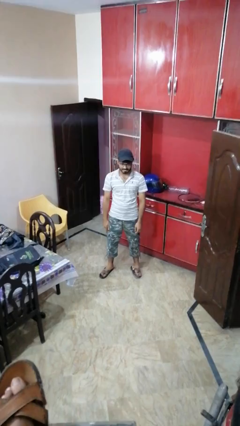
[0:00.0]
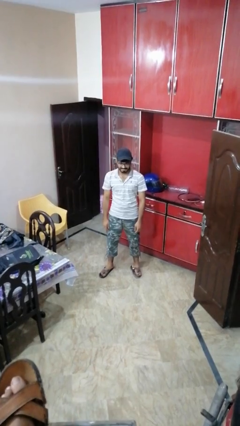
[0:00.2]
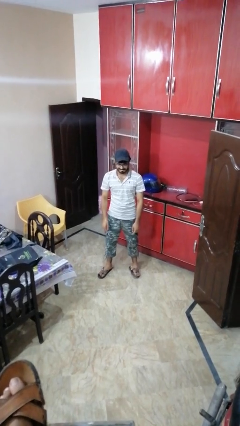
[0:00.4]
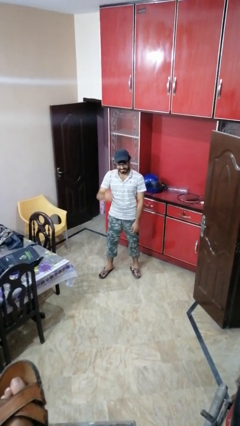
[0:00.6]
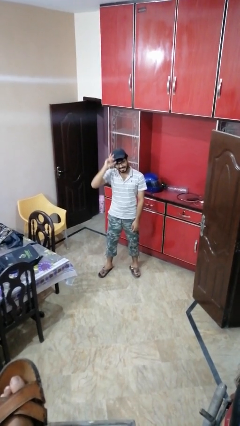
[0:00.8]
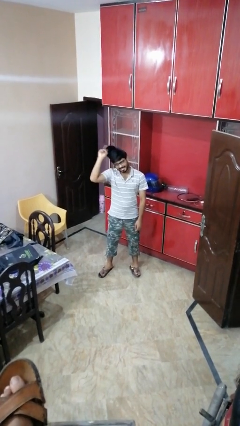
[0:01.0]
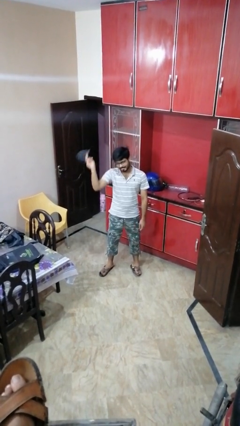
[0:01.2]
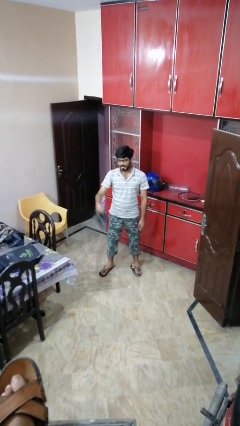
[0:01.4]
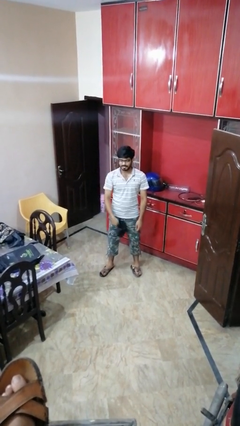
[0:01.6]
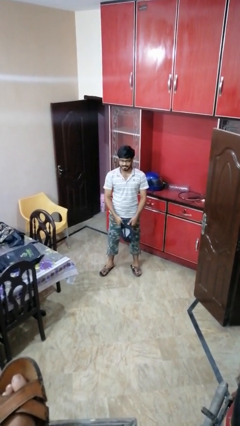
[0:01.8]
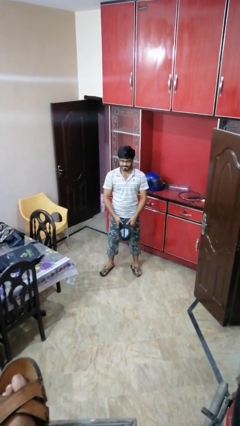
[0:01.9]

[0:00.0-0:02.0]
person takes off hat

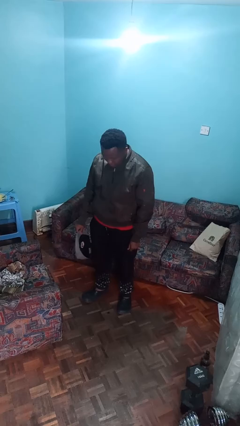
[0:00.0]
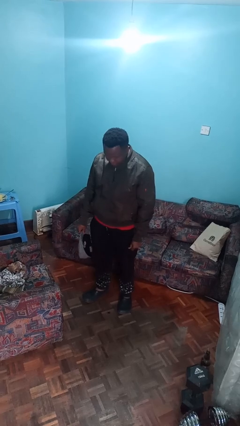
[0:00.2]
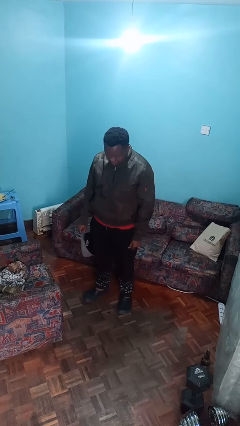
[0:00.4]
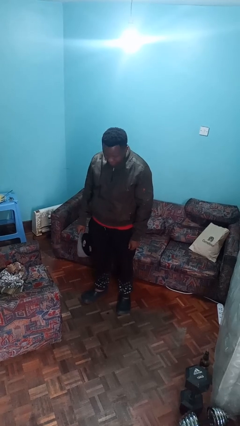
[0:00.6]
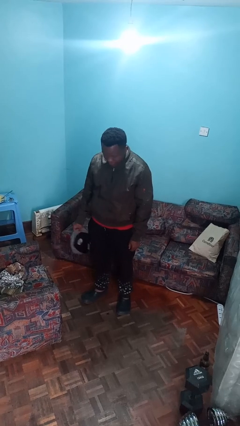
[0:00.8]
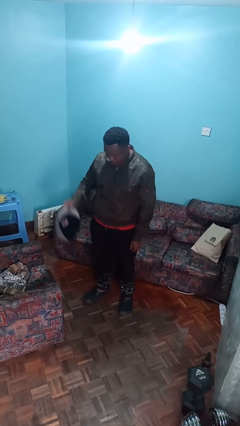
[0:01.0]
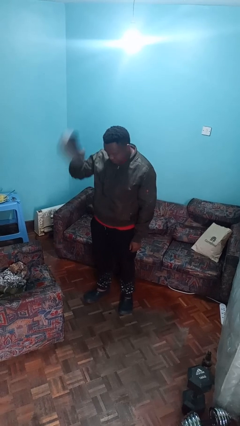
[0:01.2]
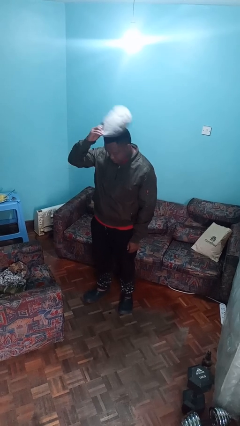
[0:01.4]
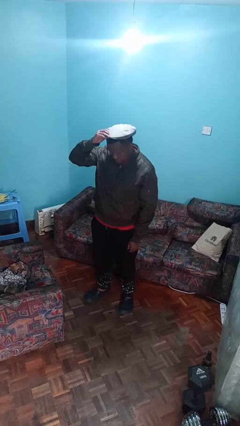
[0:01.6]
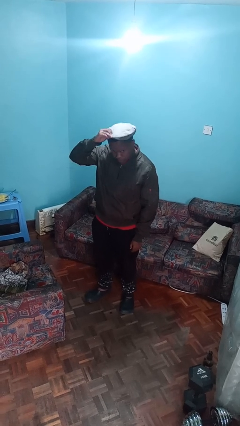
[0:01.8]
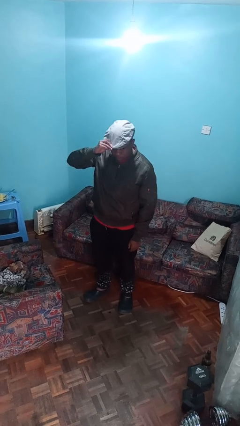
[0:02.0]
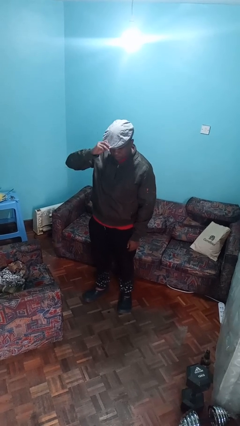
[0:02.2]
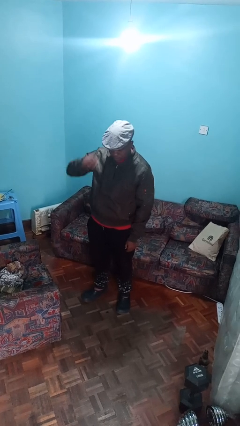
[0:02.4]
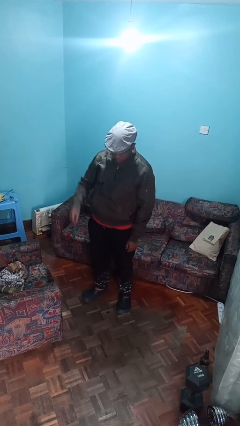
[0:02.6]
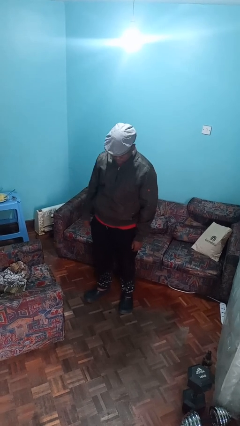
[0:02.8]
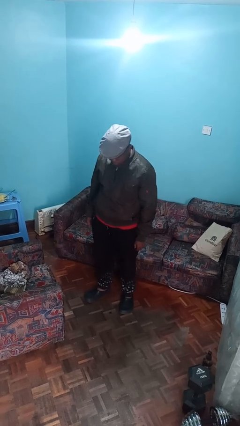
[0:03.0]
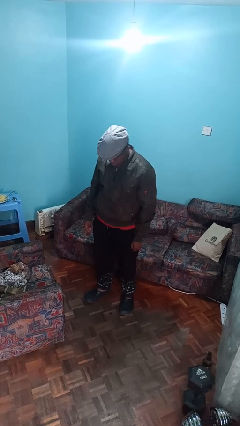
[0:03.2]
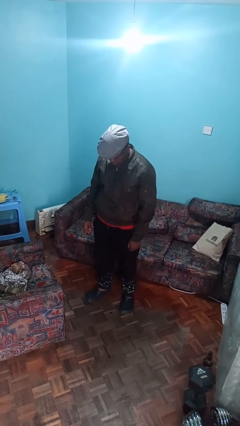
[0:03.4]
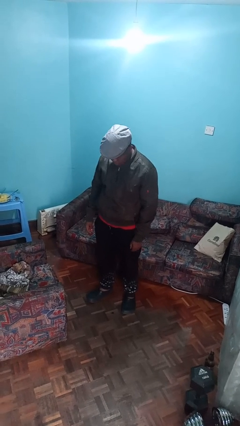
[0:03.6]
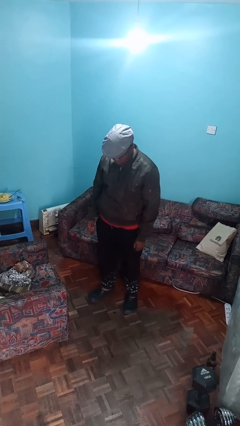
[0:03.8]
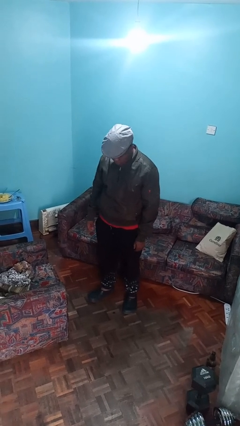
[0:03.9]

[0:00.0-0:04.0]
person puts on hat

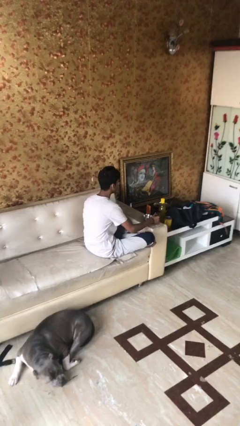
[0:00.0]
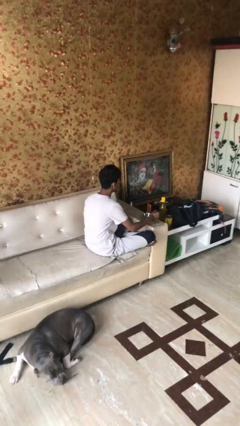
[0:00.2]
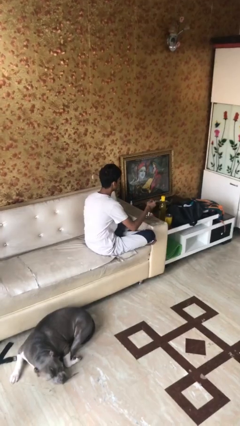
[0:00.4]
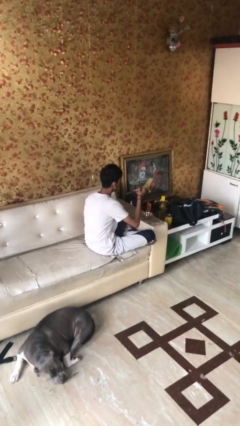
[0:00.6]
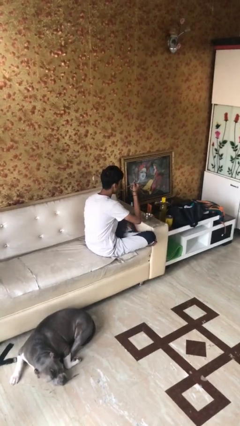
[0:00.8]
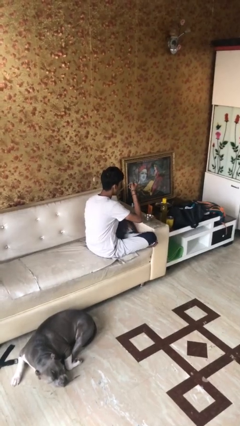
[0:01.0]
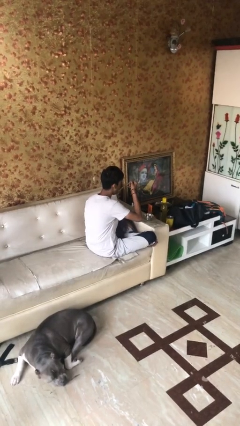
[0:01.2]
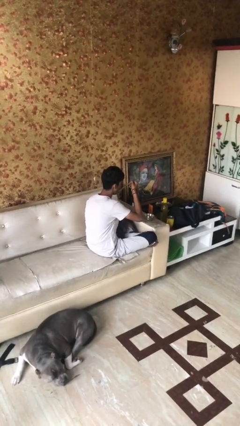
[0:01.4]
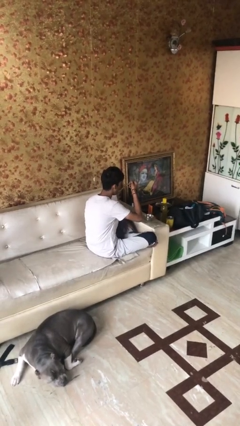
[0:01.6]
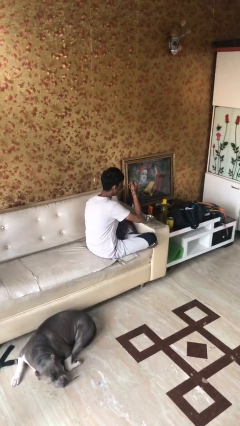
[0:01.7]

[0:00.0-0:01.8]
person eats with utensil

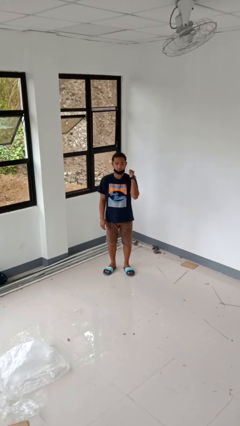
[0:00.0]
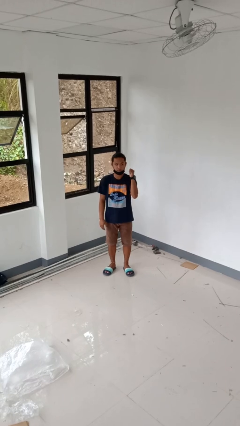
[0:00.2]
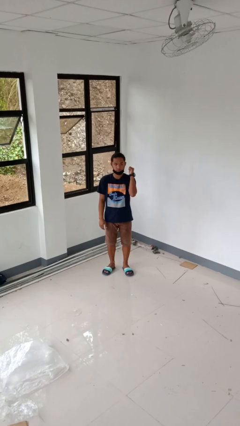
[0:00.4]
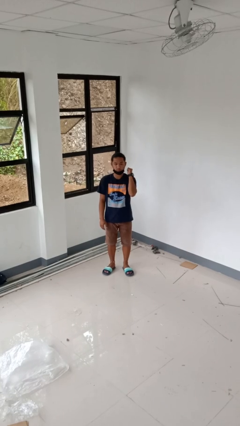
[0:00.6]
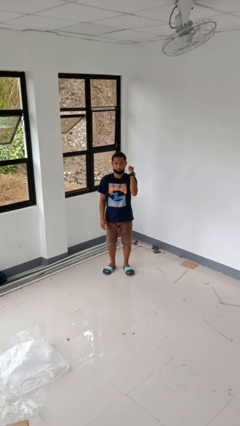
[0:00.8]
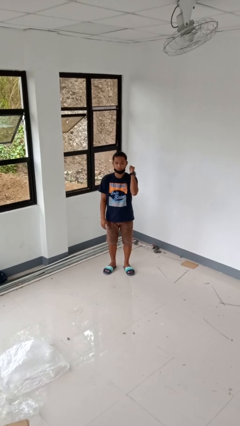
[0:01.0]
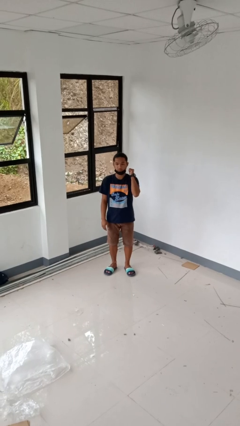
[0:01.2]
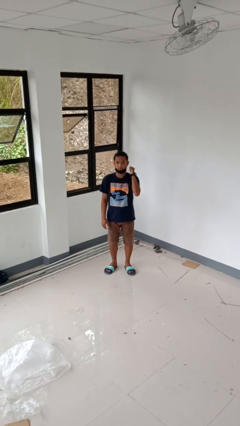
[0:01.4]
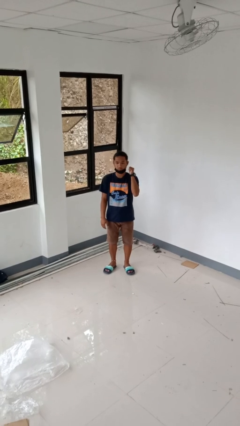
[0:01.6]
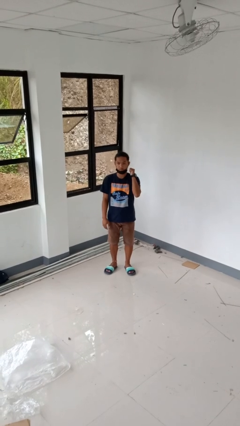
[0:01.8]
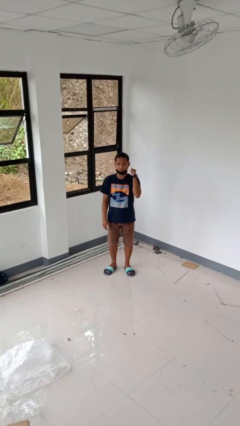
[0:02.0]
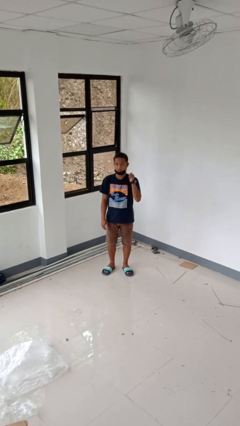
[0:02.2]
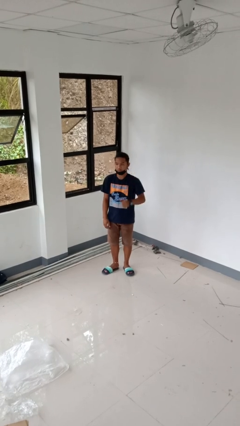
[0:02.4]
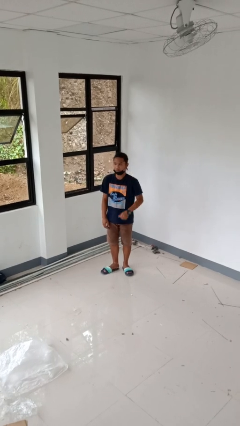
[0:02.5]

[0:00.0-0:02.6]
person gestures behind me

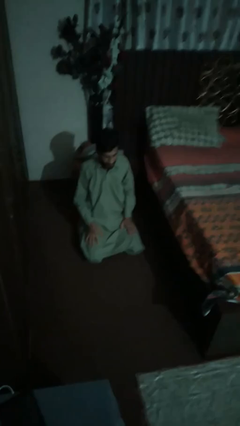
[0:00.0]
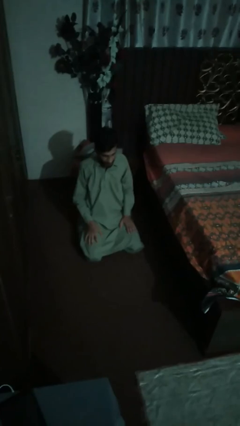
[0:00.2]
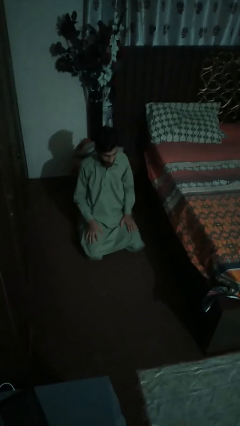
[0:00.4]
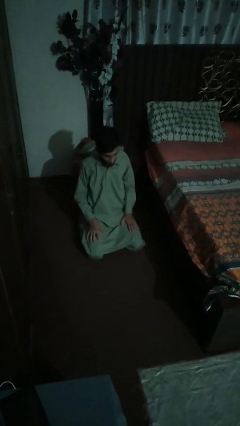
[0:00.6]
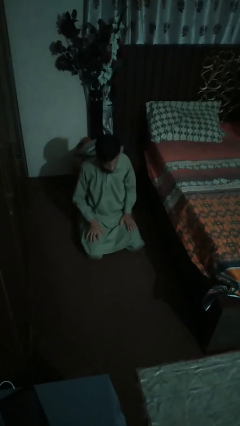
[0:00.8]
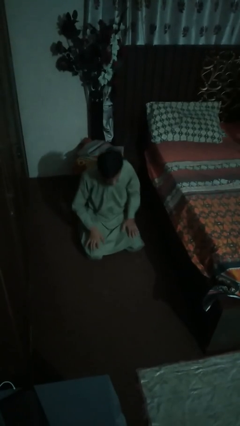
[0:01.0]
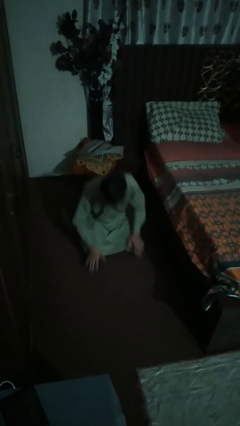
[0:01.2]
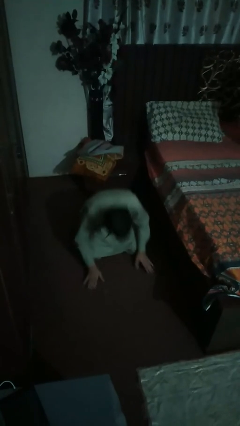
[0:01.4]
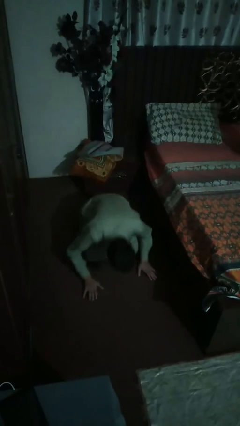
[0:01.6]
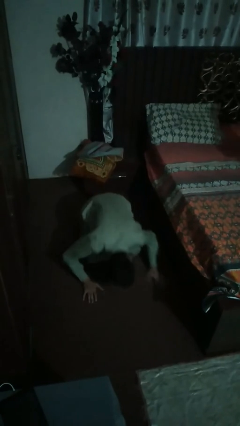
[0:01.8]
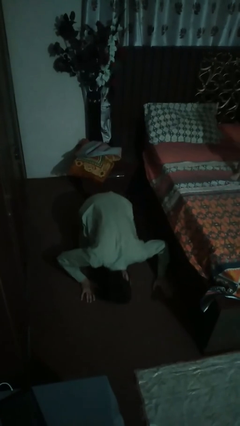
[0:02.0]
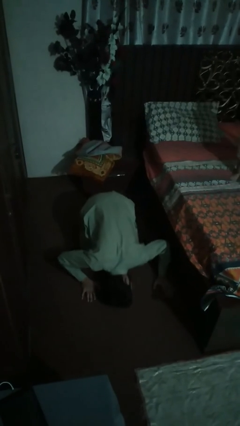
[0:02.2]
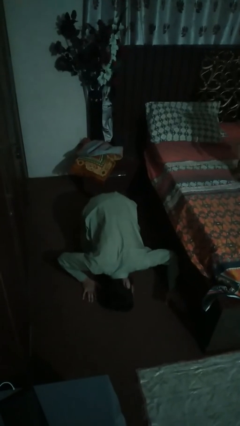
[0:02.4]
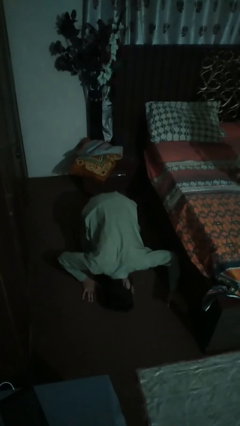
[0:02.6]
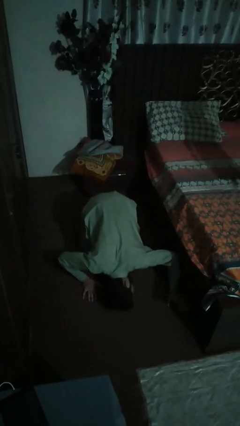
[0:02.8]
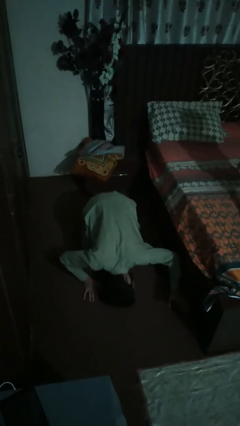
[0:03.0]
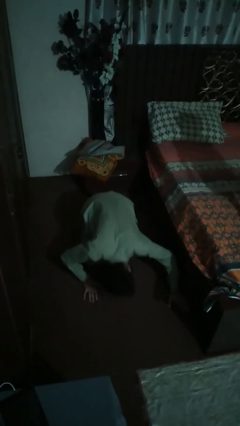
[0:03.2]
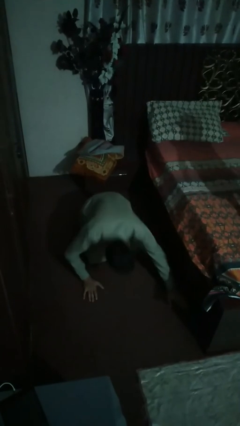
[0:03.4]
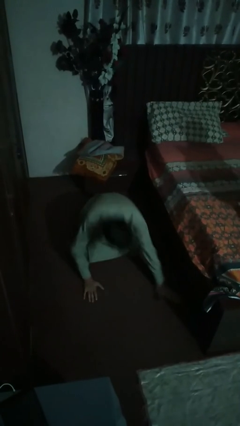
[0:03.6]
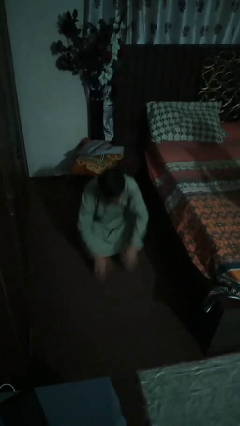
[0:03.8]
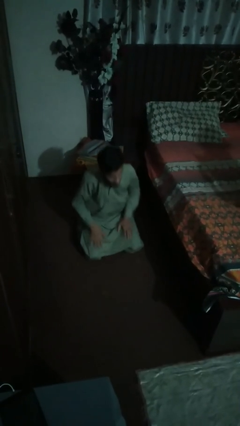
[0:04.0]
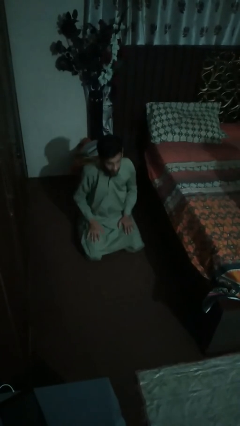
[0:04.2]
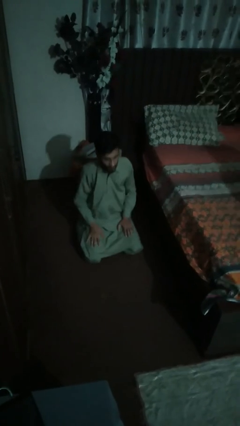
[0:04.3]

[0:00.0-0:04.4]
person searches under bed

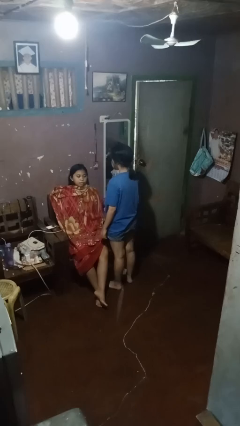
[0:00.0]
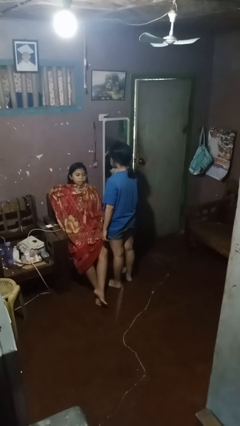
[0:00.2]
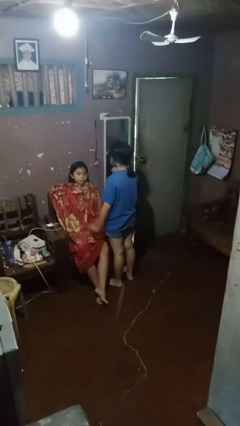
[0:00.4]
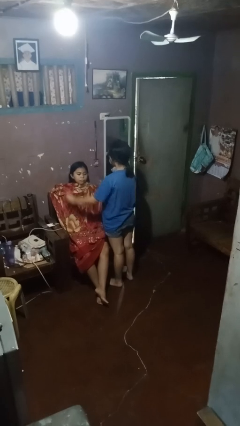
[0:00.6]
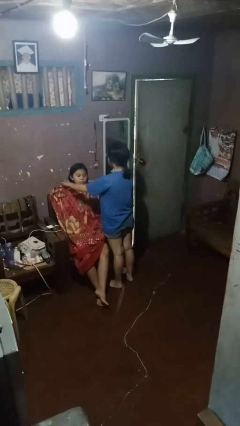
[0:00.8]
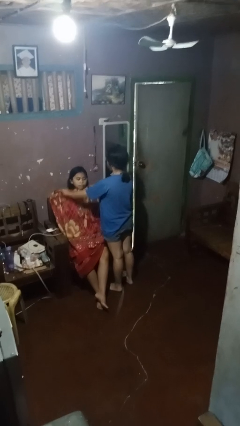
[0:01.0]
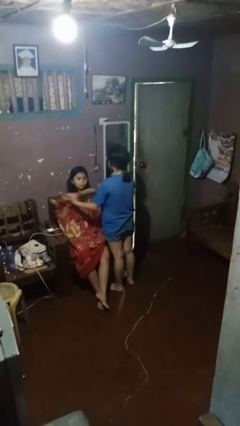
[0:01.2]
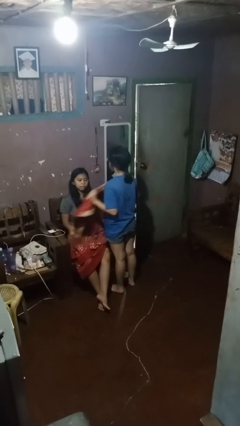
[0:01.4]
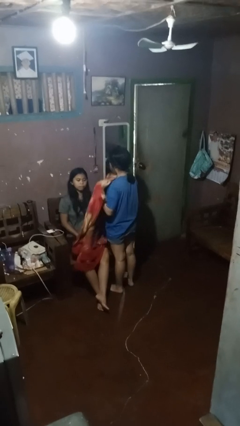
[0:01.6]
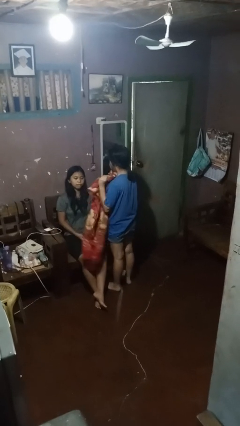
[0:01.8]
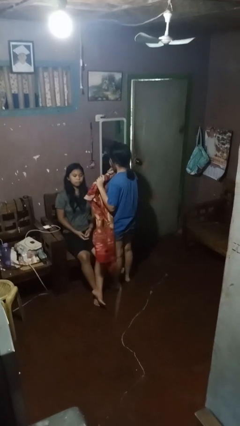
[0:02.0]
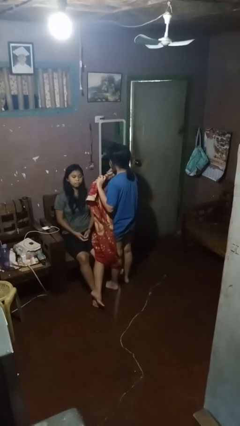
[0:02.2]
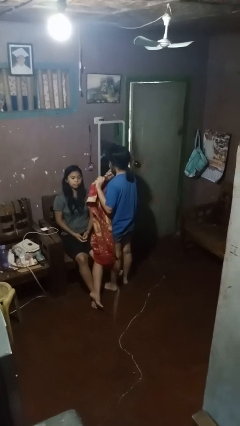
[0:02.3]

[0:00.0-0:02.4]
person uncovers friend with blanket
